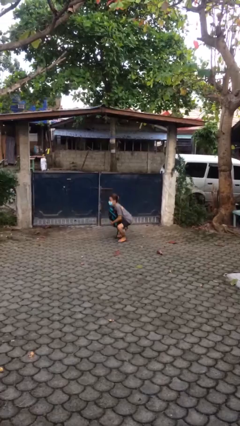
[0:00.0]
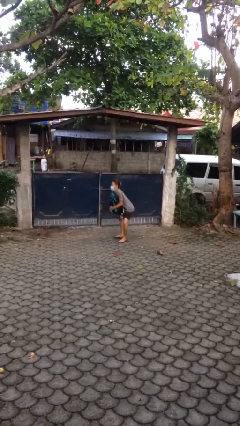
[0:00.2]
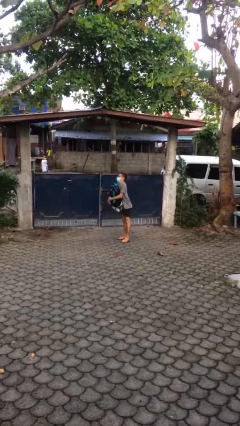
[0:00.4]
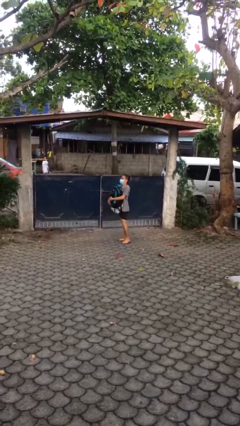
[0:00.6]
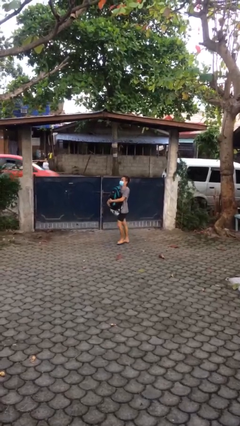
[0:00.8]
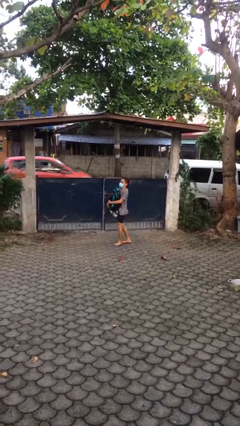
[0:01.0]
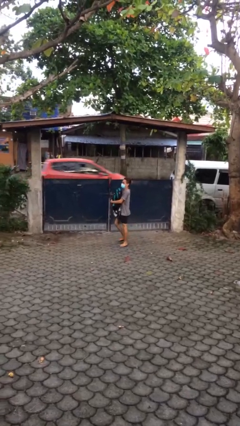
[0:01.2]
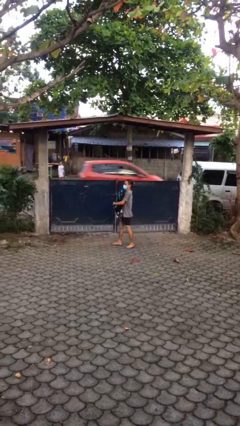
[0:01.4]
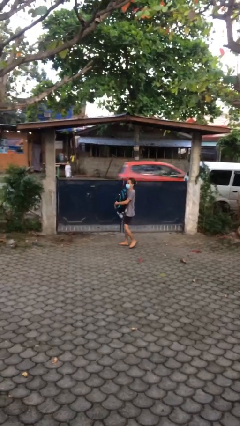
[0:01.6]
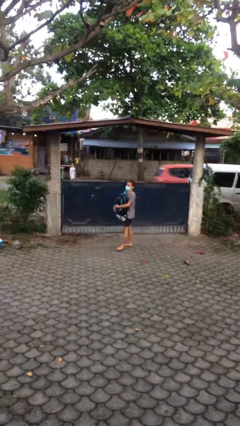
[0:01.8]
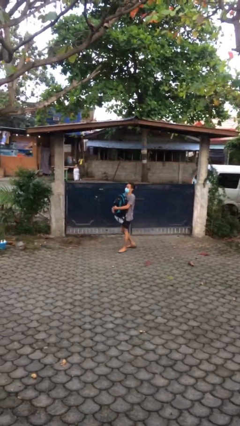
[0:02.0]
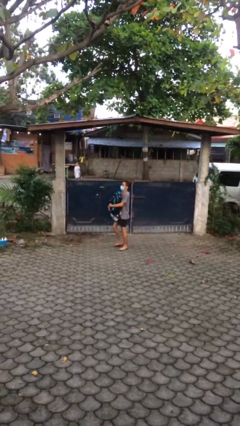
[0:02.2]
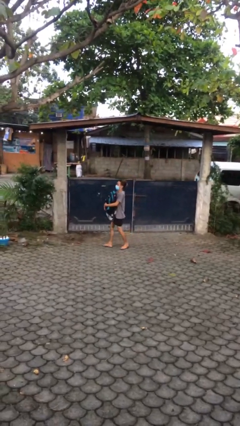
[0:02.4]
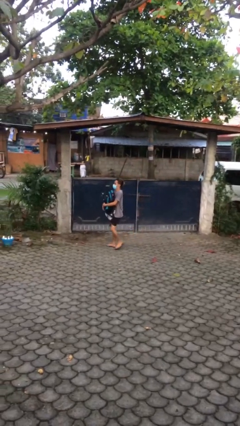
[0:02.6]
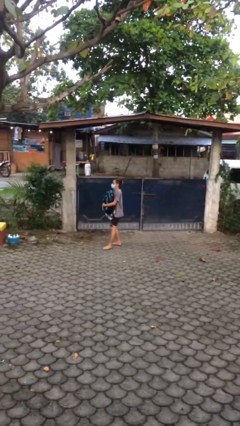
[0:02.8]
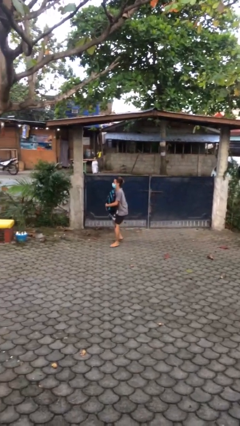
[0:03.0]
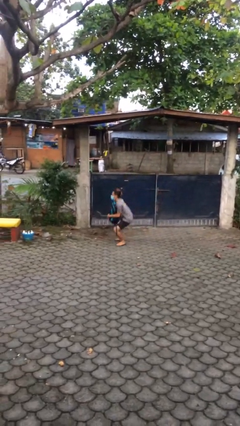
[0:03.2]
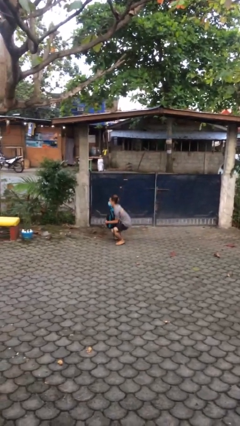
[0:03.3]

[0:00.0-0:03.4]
person carries heavy object

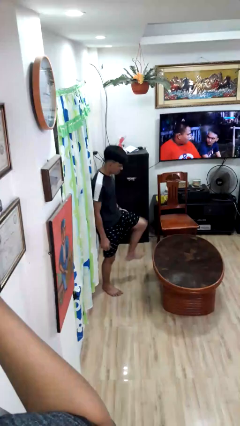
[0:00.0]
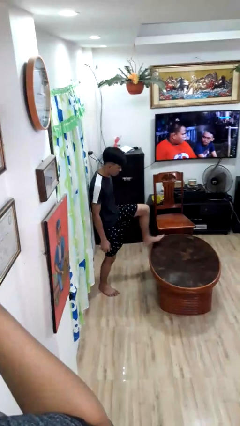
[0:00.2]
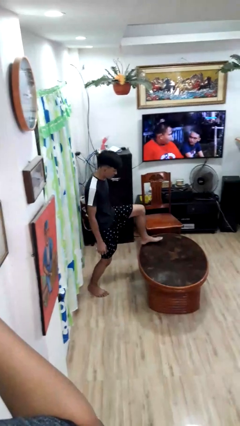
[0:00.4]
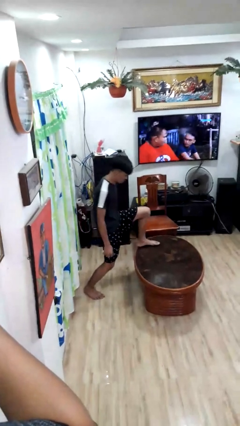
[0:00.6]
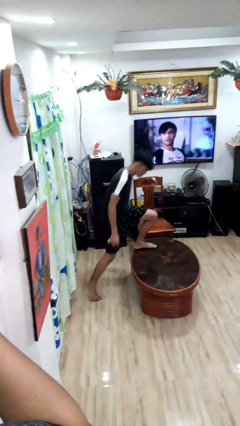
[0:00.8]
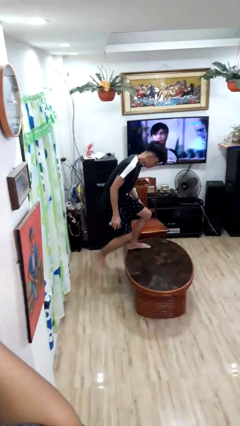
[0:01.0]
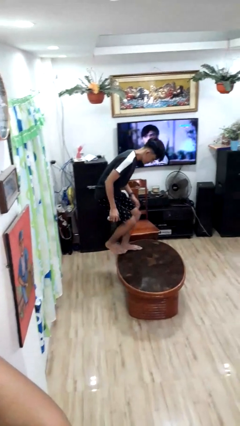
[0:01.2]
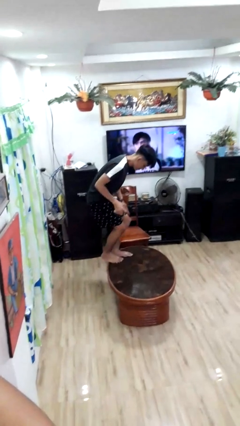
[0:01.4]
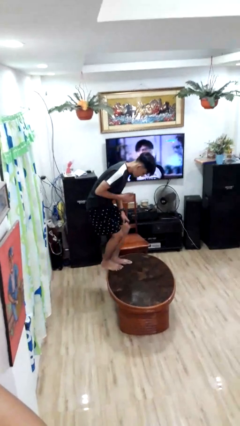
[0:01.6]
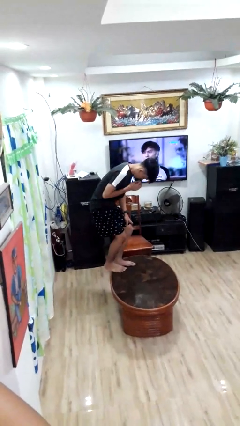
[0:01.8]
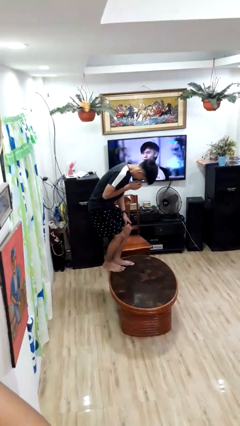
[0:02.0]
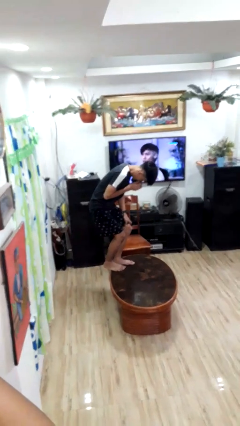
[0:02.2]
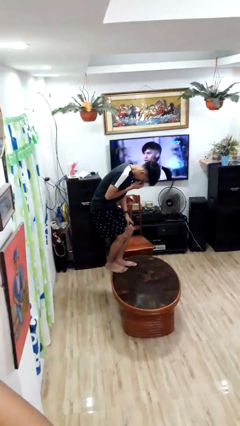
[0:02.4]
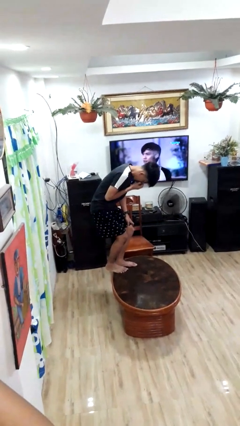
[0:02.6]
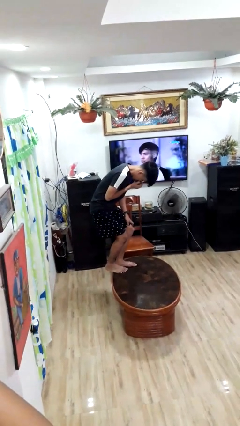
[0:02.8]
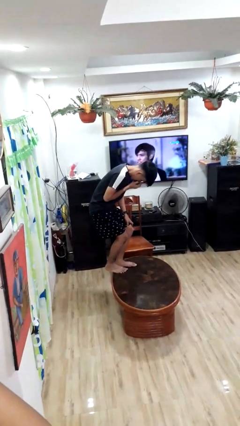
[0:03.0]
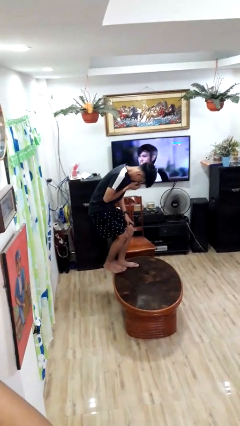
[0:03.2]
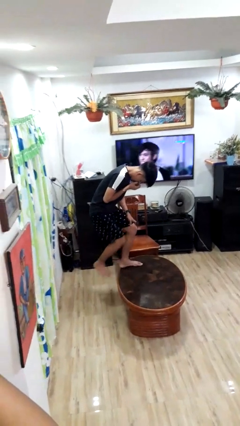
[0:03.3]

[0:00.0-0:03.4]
person climbs on table

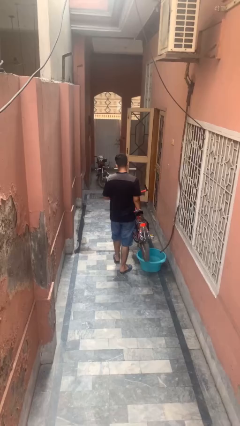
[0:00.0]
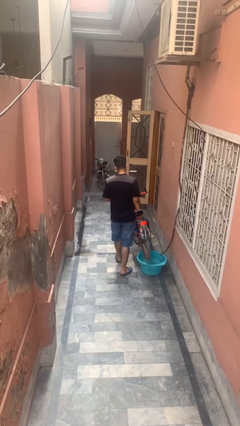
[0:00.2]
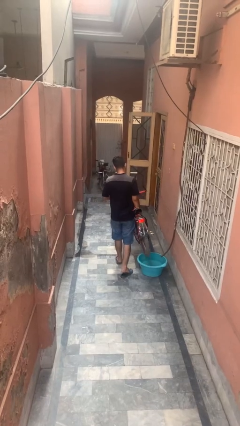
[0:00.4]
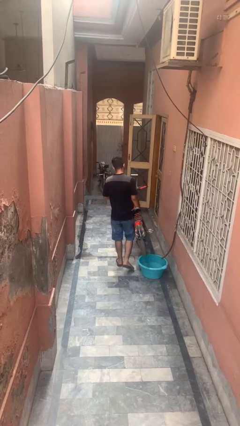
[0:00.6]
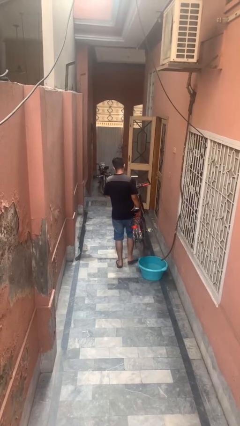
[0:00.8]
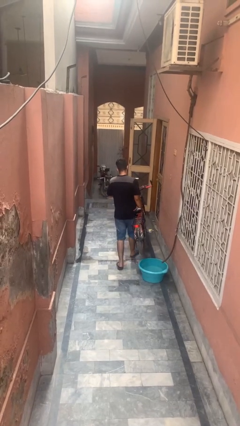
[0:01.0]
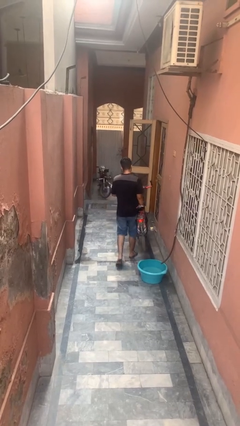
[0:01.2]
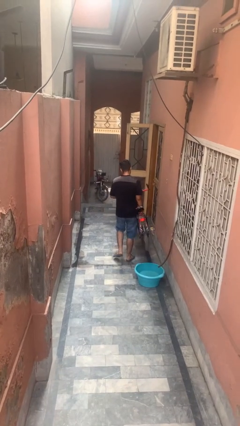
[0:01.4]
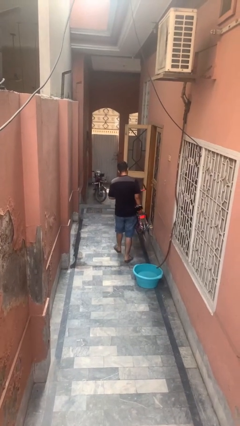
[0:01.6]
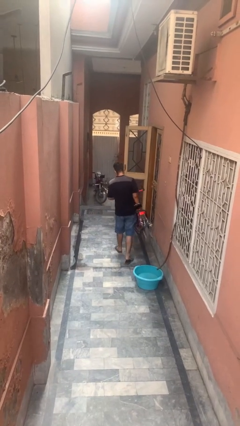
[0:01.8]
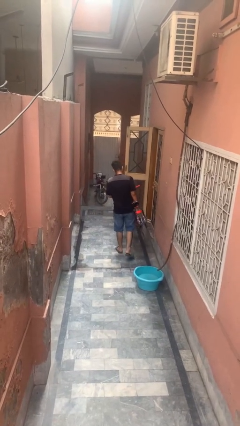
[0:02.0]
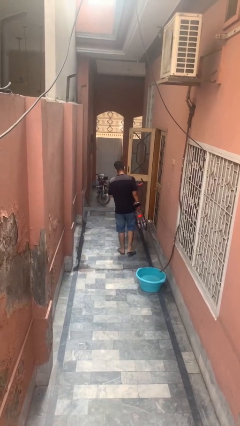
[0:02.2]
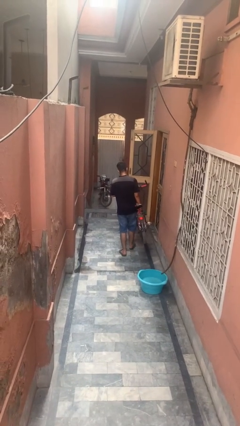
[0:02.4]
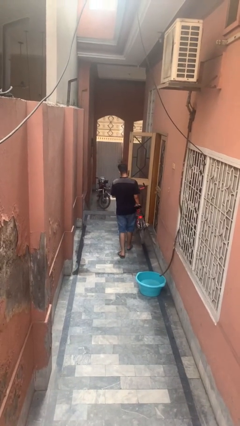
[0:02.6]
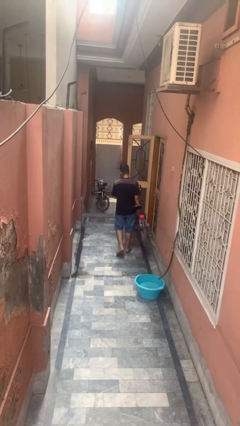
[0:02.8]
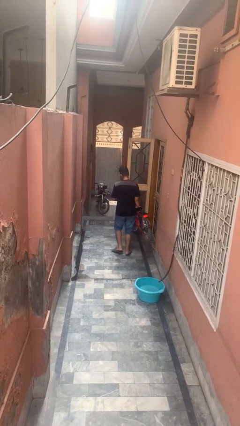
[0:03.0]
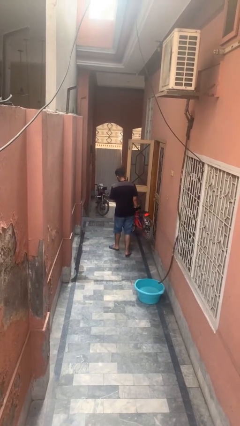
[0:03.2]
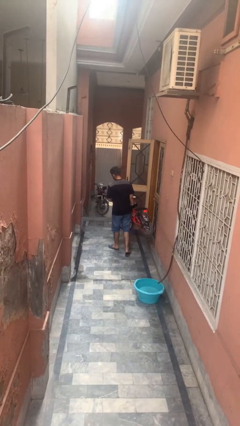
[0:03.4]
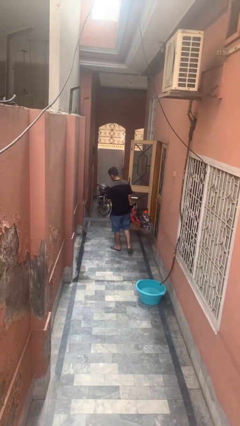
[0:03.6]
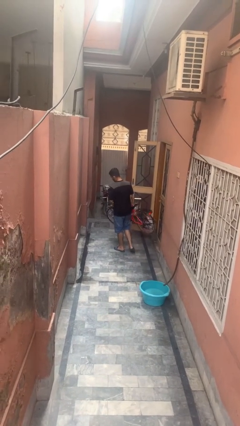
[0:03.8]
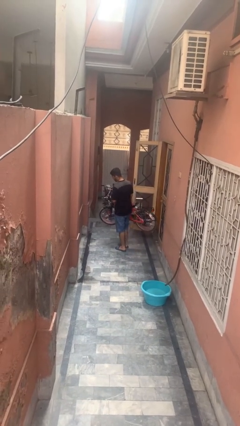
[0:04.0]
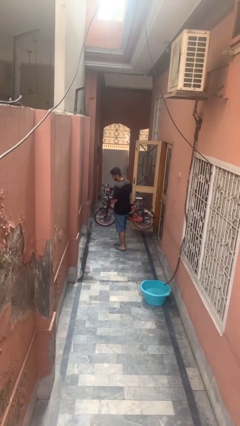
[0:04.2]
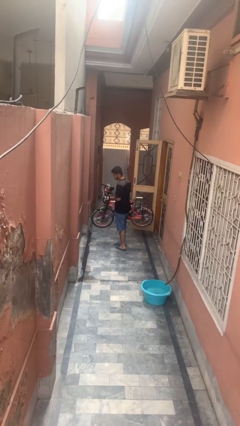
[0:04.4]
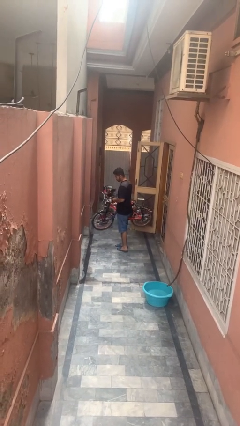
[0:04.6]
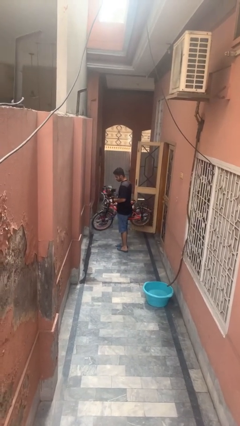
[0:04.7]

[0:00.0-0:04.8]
person carries bicycle

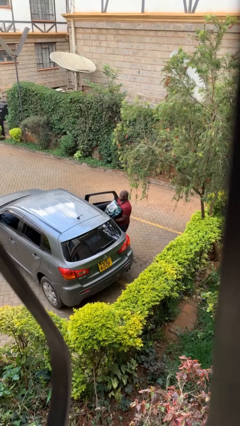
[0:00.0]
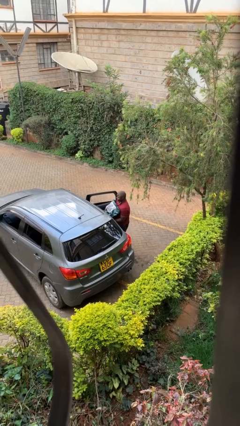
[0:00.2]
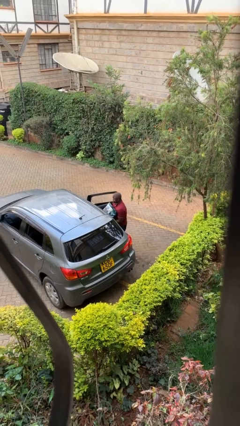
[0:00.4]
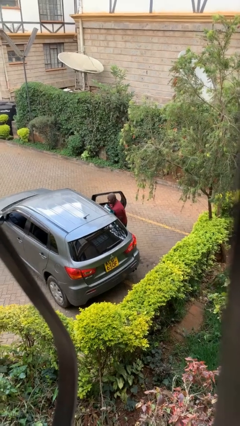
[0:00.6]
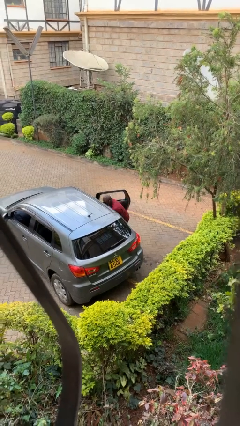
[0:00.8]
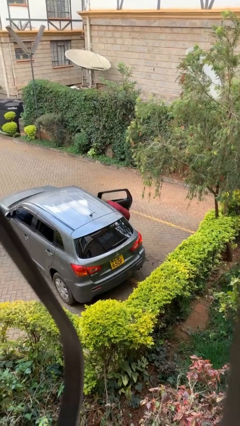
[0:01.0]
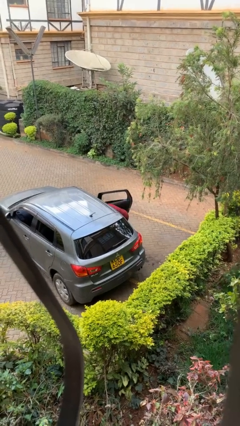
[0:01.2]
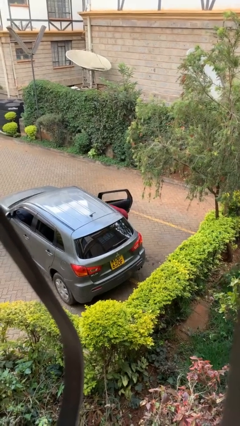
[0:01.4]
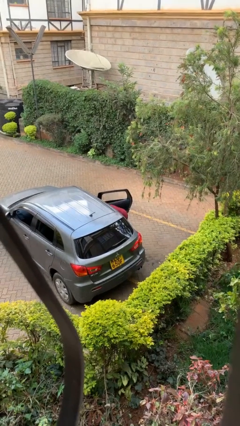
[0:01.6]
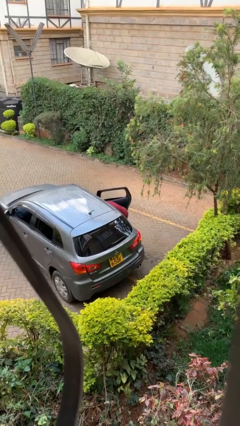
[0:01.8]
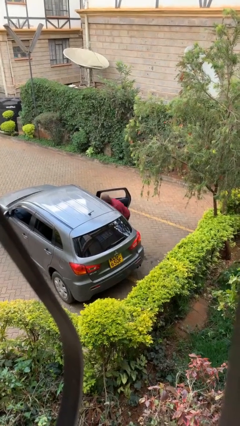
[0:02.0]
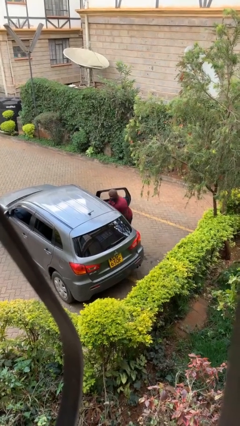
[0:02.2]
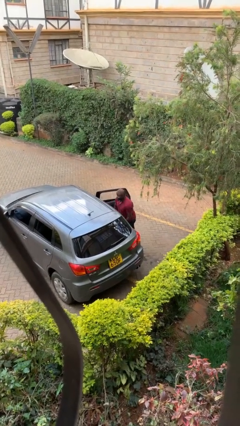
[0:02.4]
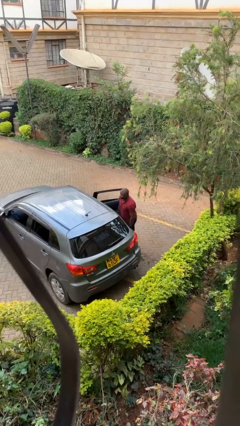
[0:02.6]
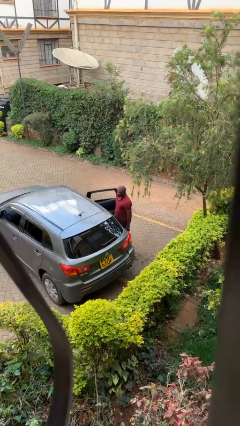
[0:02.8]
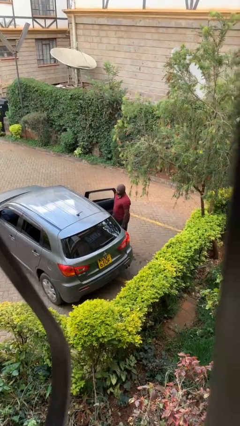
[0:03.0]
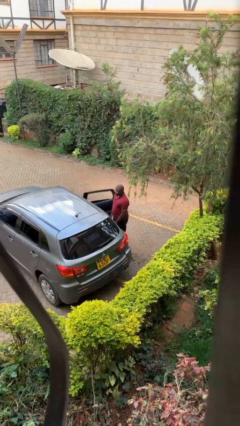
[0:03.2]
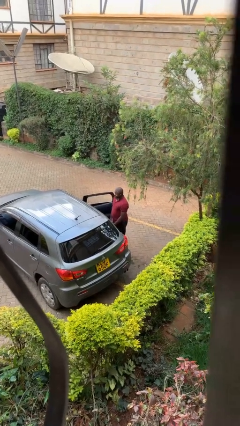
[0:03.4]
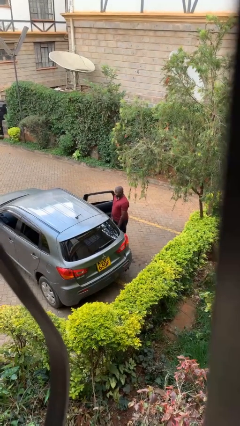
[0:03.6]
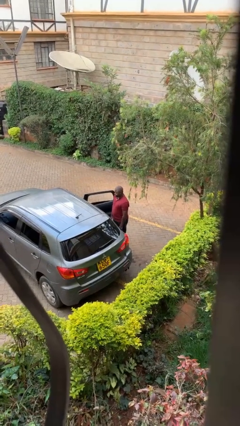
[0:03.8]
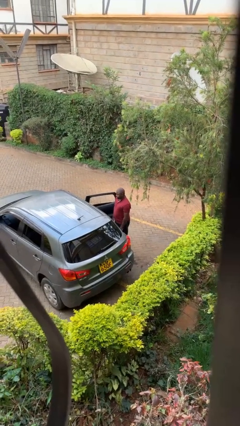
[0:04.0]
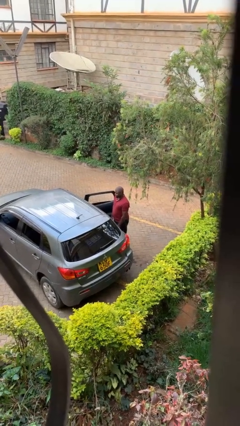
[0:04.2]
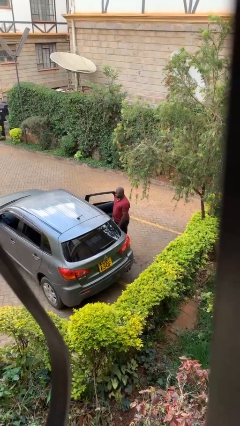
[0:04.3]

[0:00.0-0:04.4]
person loads car

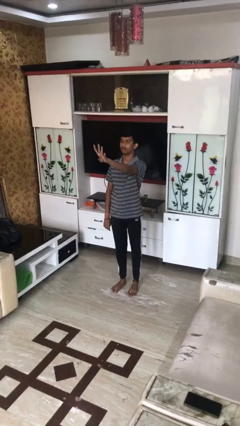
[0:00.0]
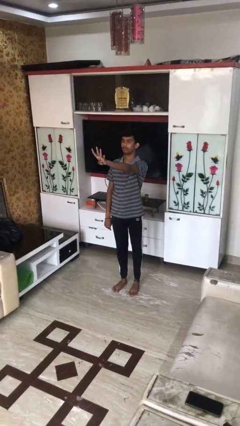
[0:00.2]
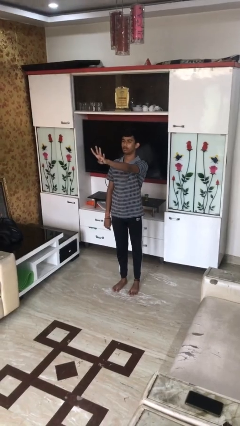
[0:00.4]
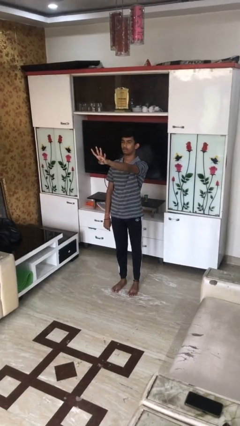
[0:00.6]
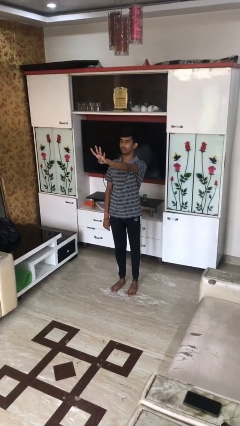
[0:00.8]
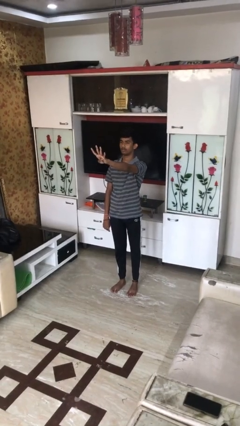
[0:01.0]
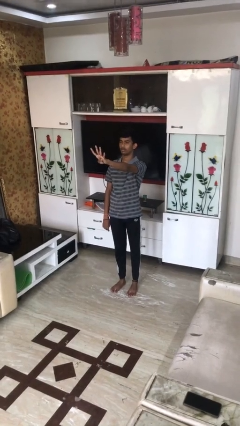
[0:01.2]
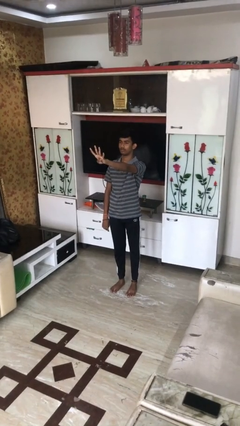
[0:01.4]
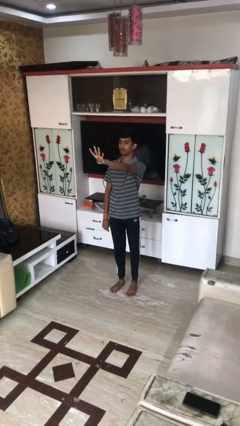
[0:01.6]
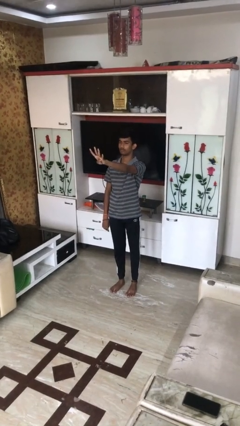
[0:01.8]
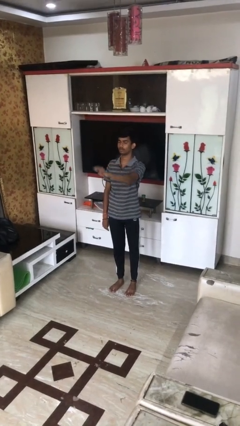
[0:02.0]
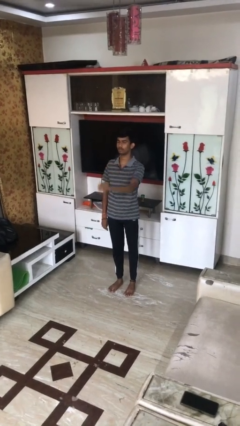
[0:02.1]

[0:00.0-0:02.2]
person gestures number four
